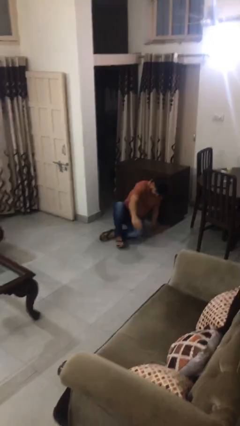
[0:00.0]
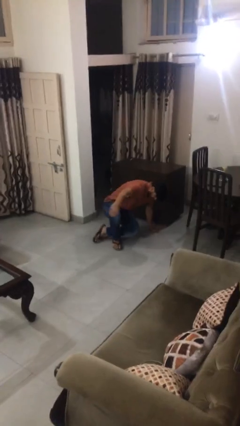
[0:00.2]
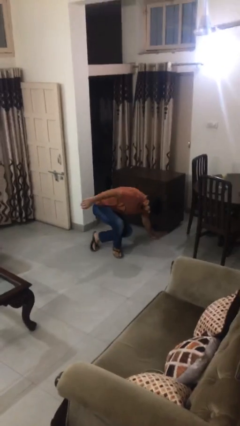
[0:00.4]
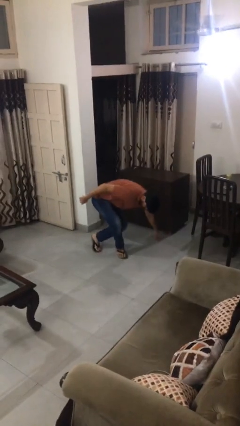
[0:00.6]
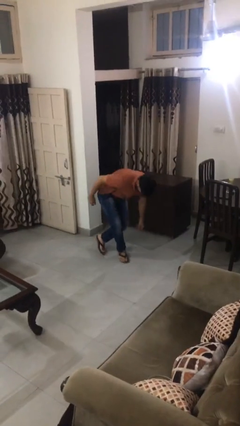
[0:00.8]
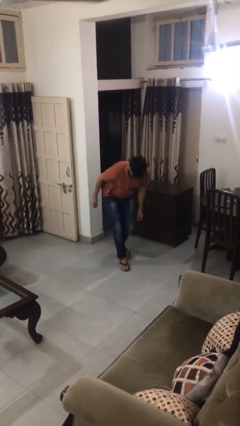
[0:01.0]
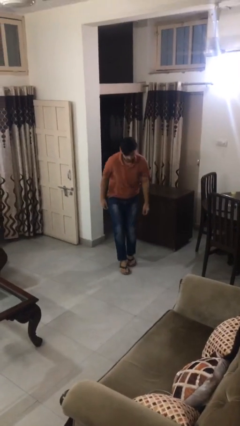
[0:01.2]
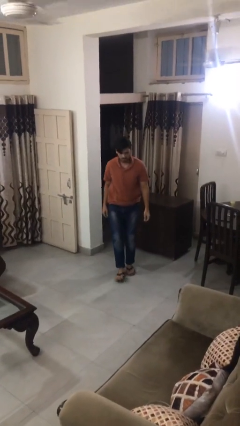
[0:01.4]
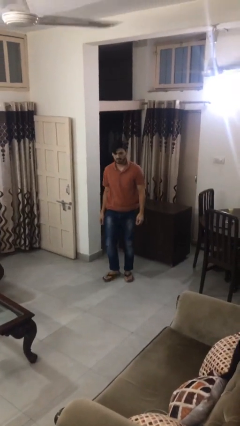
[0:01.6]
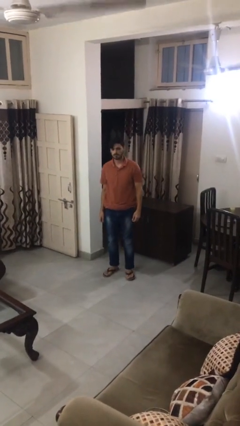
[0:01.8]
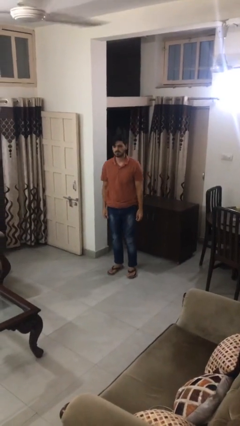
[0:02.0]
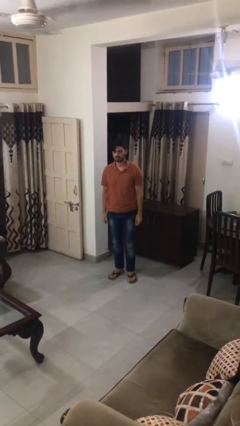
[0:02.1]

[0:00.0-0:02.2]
person stands up from floor

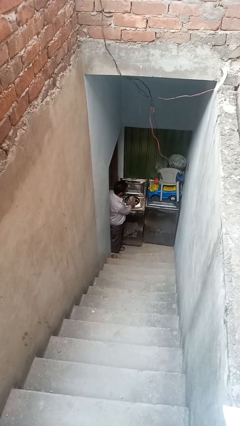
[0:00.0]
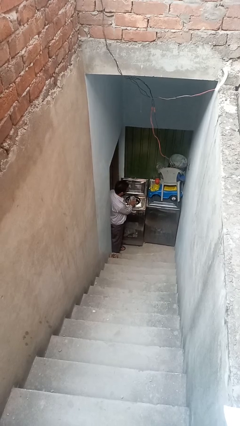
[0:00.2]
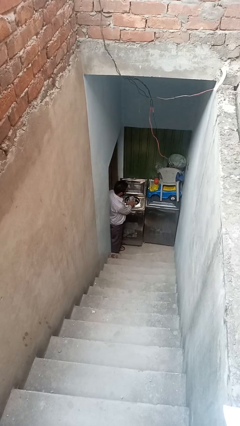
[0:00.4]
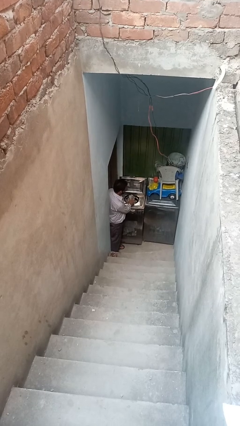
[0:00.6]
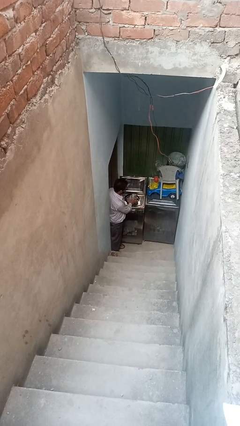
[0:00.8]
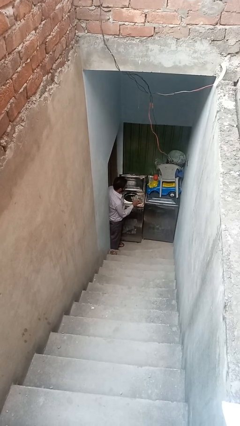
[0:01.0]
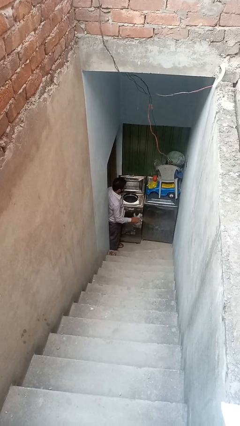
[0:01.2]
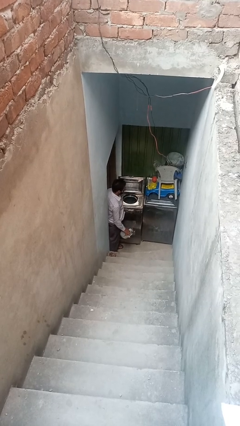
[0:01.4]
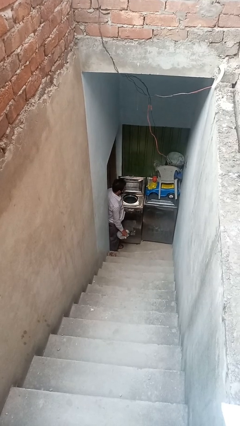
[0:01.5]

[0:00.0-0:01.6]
person unloads clotheswasher

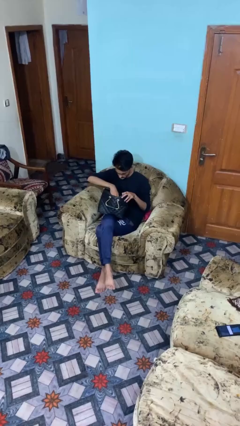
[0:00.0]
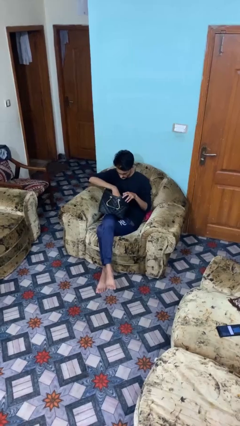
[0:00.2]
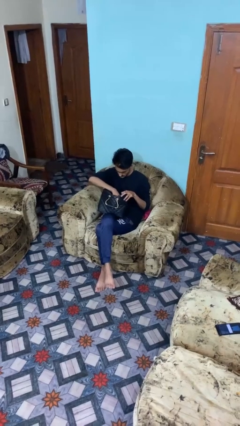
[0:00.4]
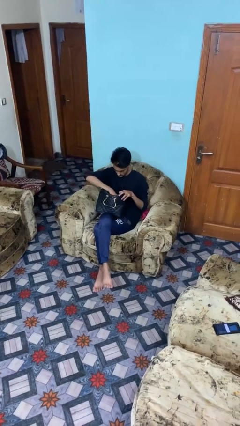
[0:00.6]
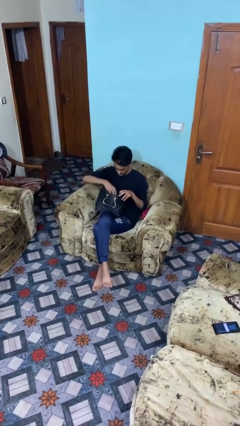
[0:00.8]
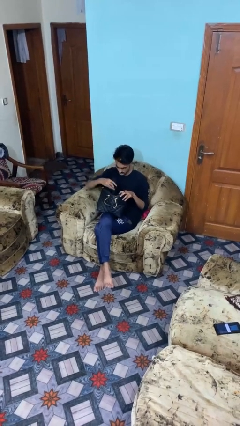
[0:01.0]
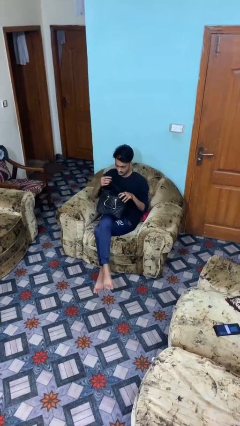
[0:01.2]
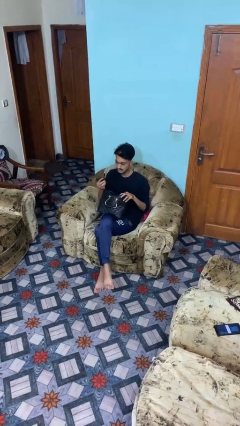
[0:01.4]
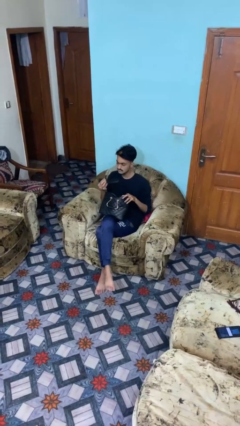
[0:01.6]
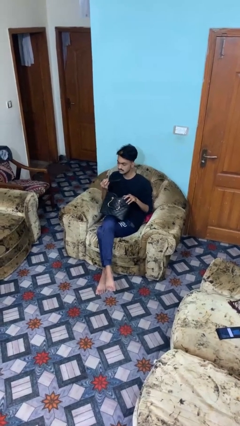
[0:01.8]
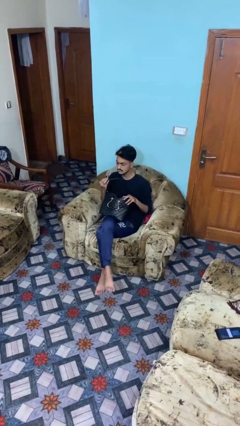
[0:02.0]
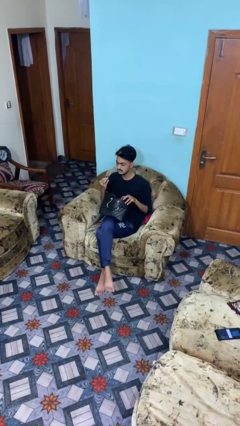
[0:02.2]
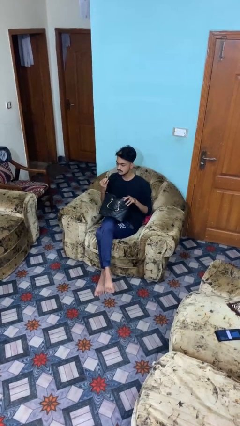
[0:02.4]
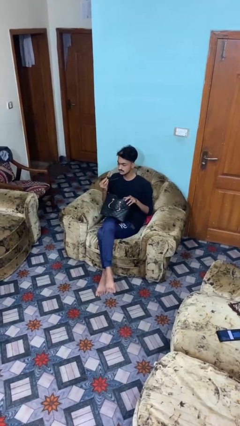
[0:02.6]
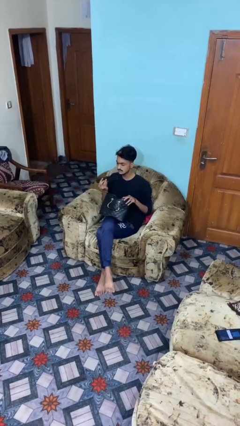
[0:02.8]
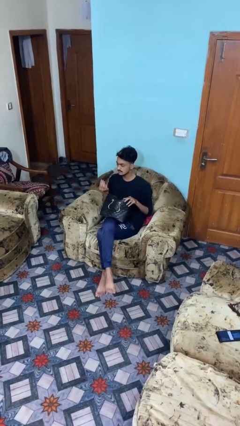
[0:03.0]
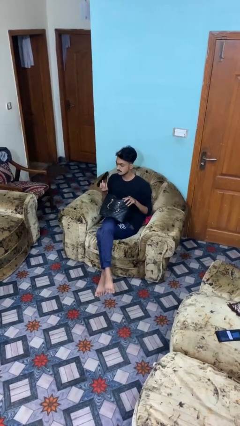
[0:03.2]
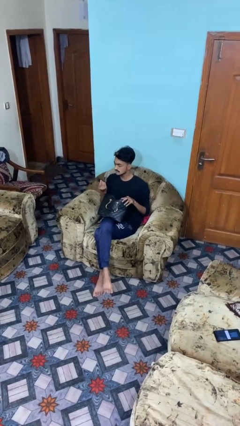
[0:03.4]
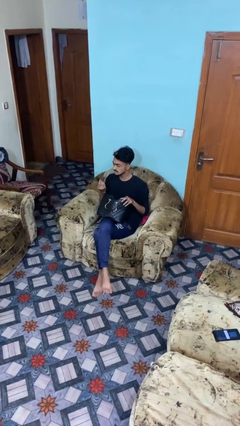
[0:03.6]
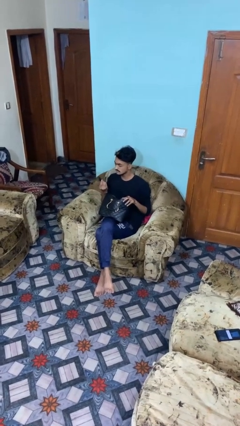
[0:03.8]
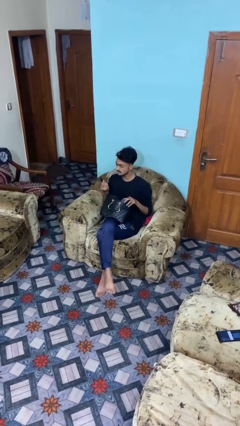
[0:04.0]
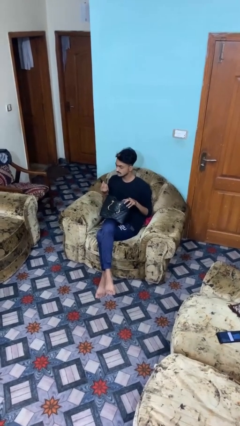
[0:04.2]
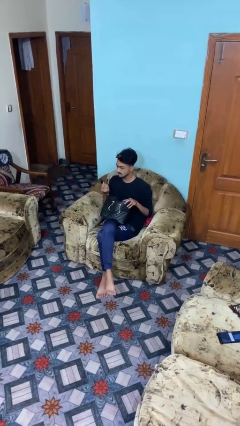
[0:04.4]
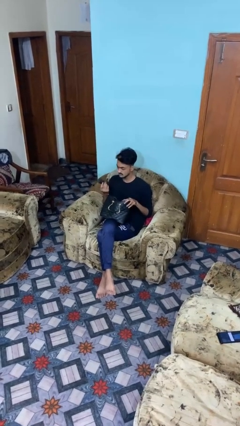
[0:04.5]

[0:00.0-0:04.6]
person takes object from purse

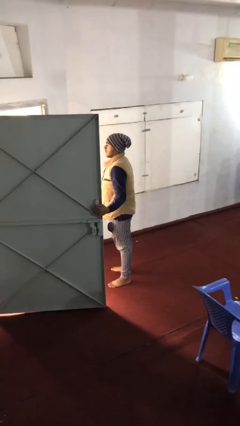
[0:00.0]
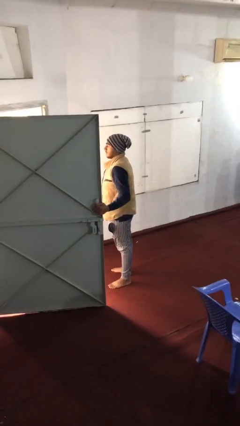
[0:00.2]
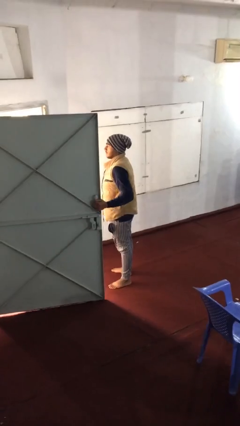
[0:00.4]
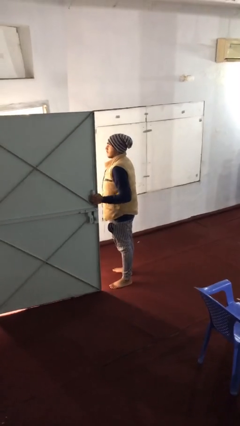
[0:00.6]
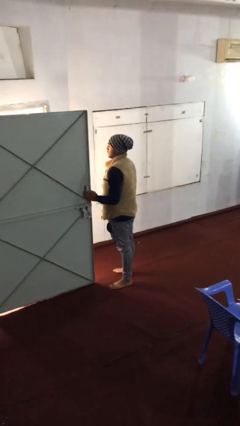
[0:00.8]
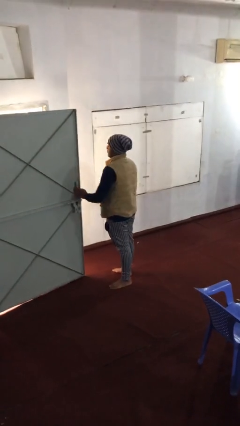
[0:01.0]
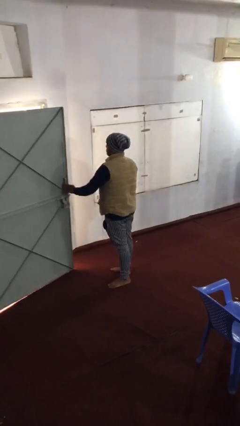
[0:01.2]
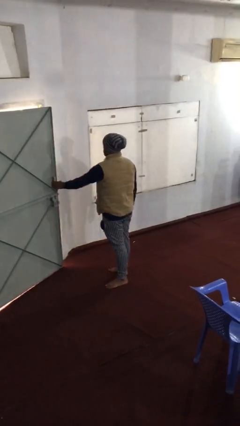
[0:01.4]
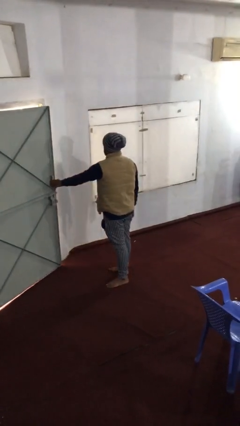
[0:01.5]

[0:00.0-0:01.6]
person closes facility door

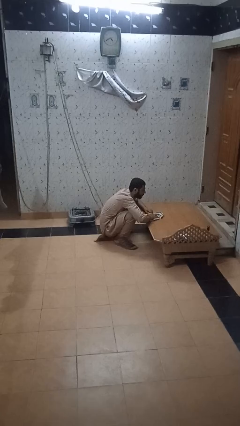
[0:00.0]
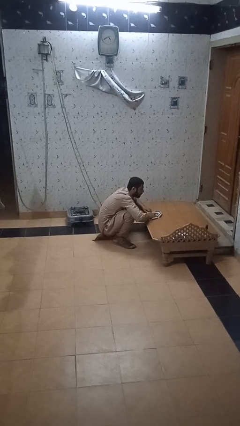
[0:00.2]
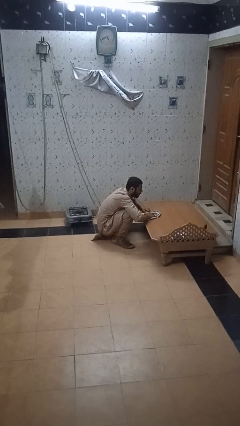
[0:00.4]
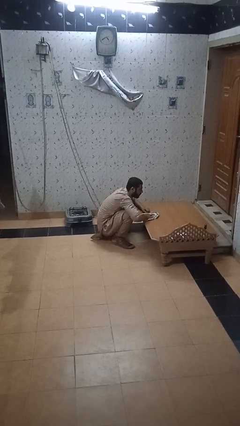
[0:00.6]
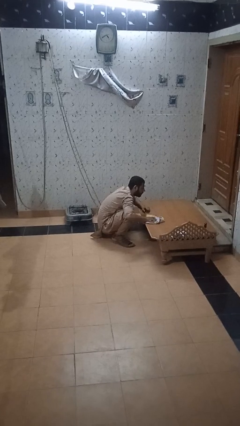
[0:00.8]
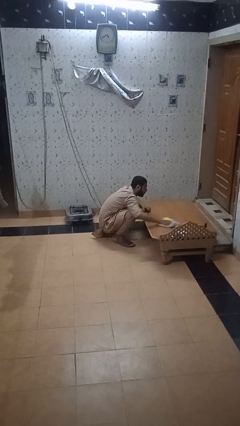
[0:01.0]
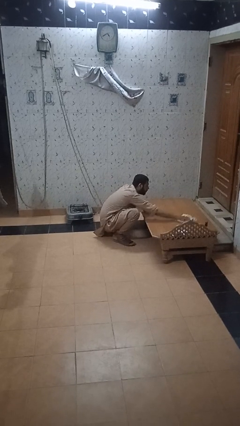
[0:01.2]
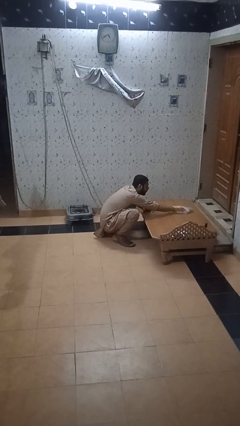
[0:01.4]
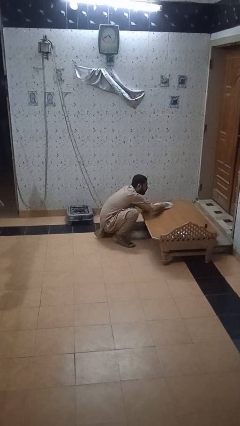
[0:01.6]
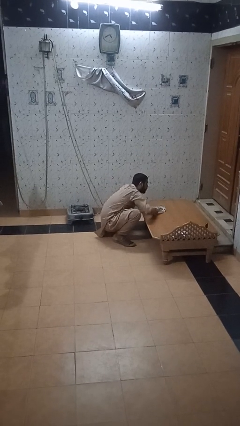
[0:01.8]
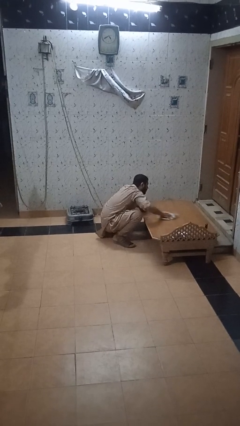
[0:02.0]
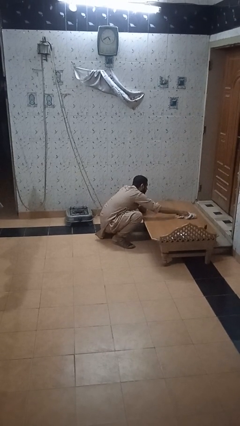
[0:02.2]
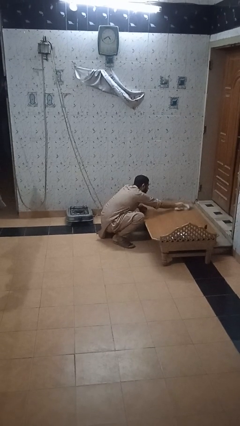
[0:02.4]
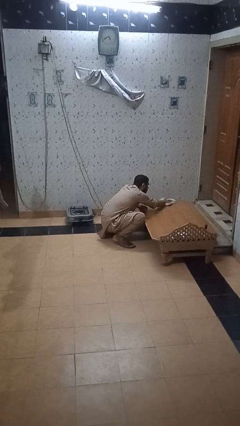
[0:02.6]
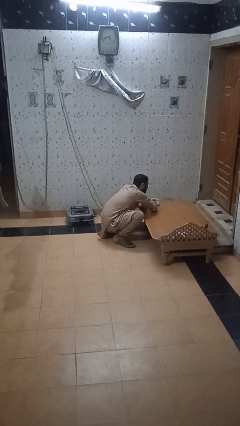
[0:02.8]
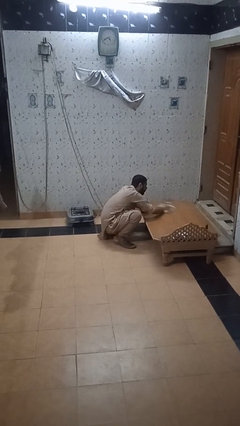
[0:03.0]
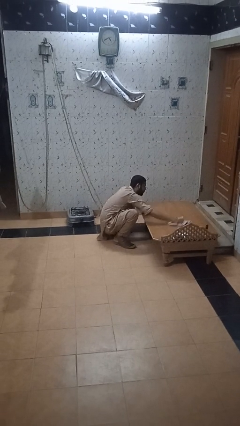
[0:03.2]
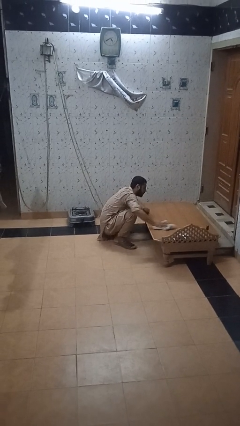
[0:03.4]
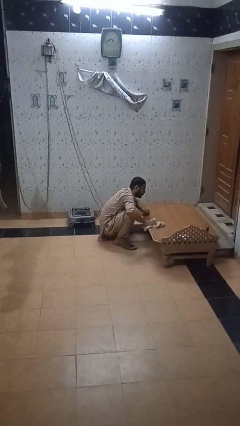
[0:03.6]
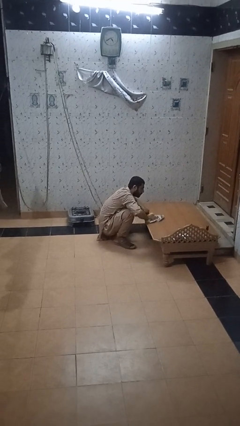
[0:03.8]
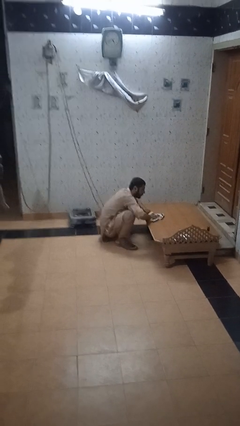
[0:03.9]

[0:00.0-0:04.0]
person cleans table with rag

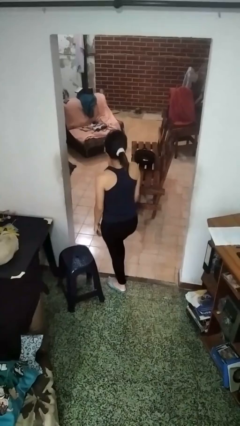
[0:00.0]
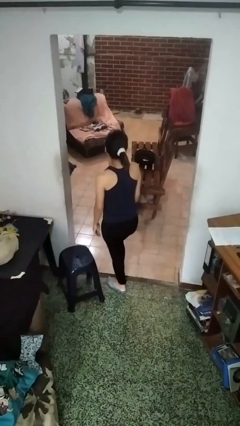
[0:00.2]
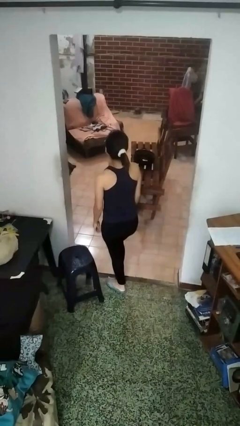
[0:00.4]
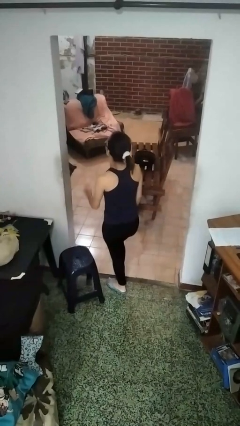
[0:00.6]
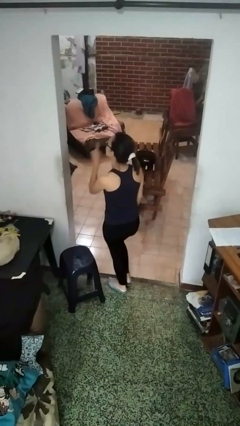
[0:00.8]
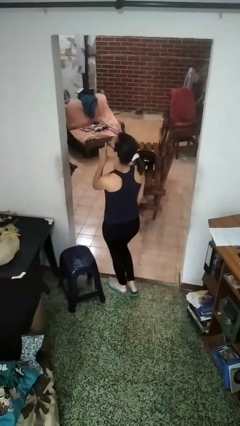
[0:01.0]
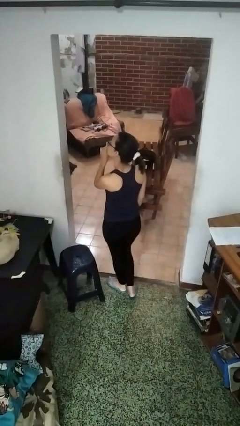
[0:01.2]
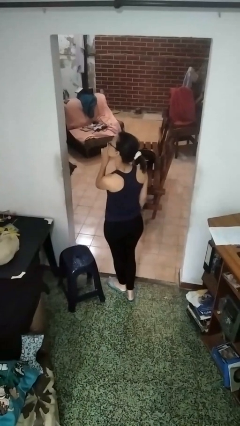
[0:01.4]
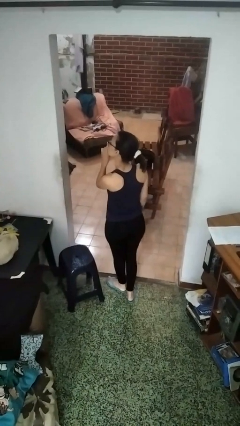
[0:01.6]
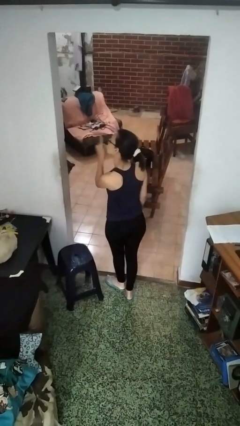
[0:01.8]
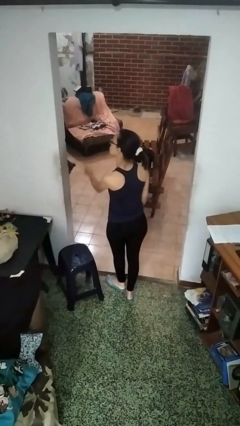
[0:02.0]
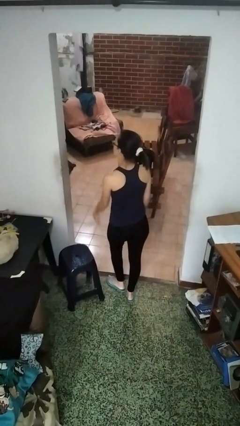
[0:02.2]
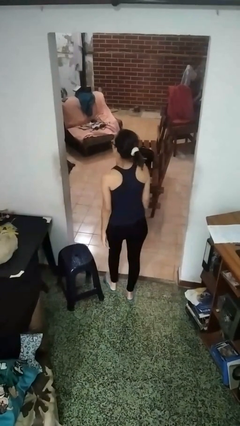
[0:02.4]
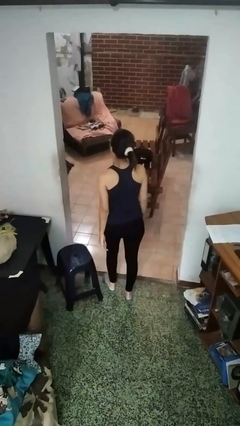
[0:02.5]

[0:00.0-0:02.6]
person gestures be quiet

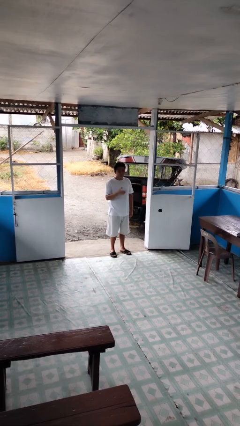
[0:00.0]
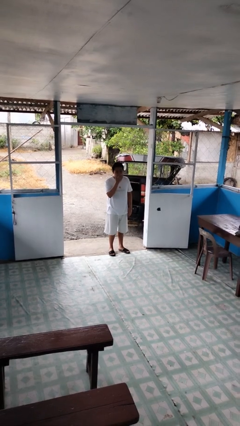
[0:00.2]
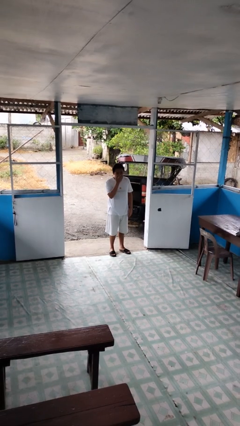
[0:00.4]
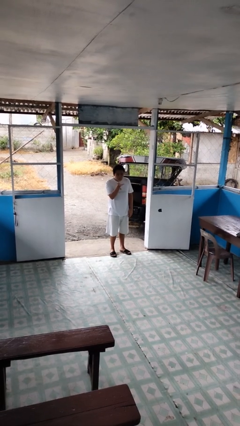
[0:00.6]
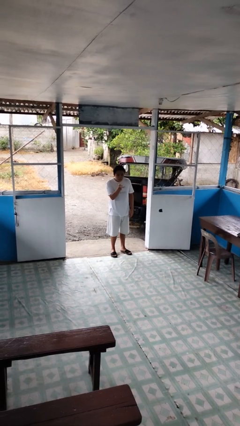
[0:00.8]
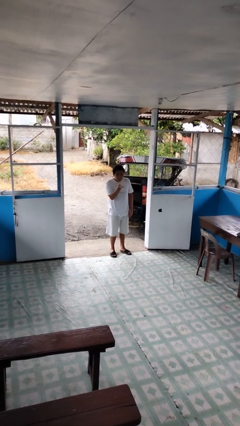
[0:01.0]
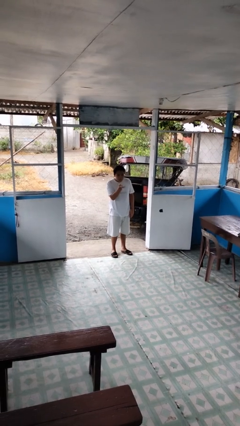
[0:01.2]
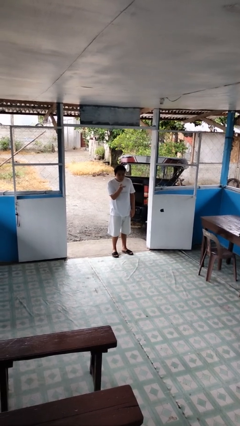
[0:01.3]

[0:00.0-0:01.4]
person gestures blow kiss
